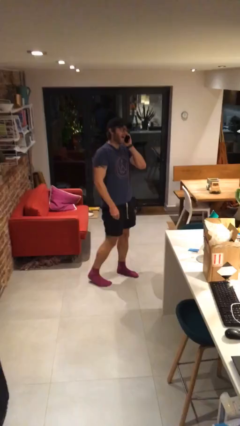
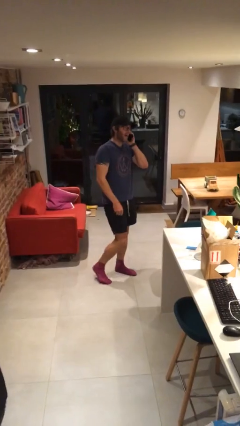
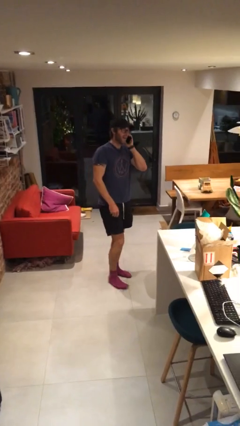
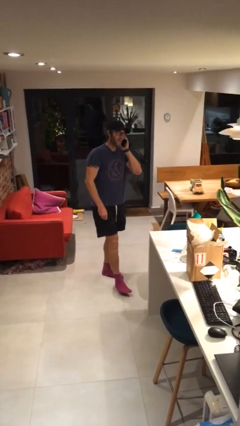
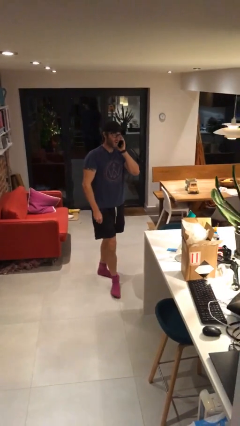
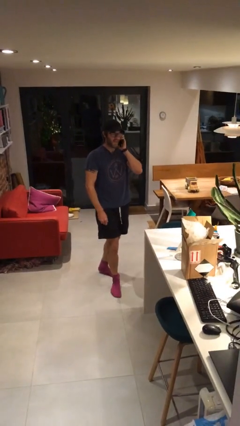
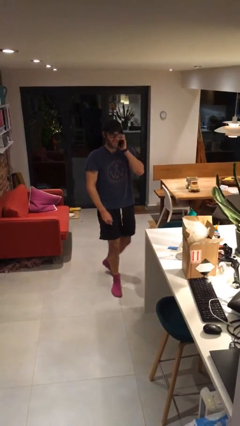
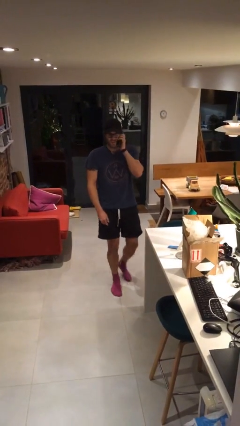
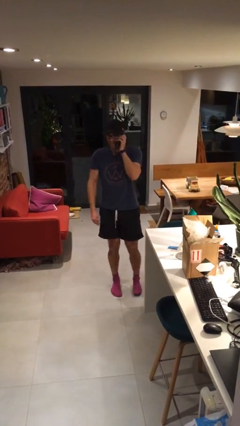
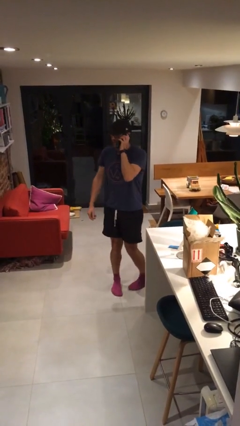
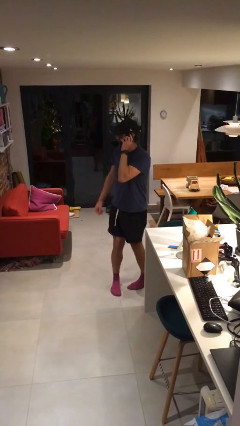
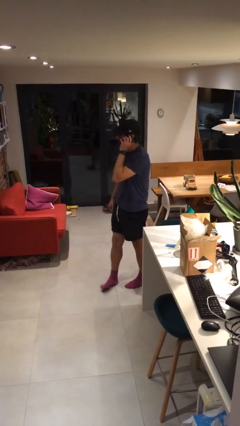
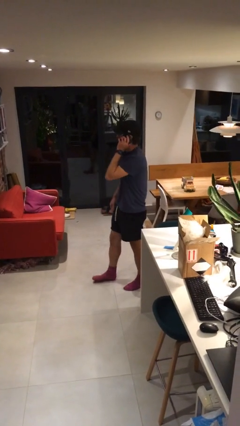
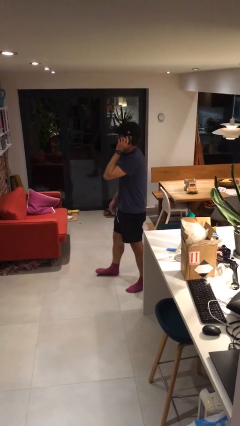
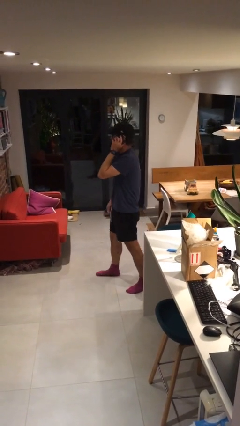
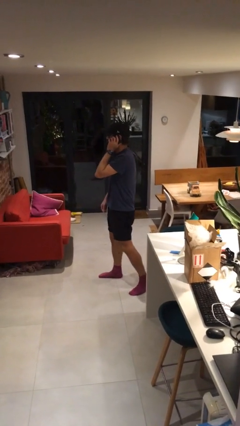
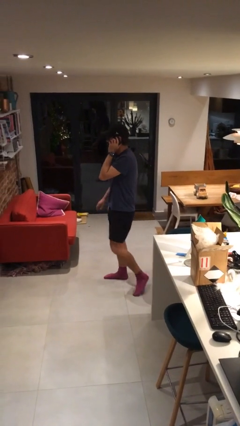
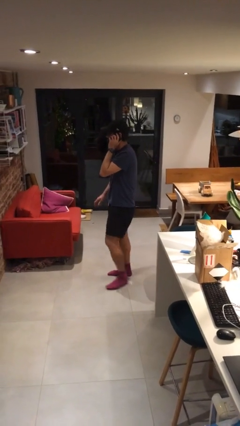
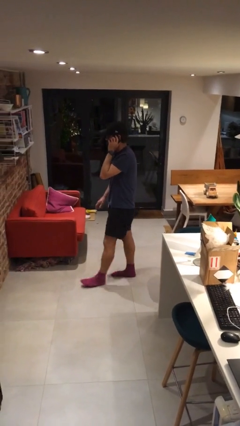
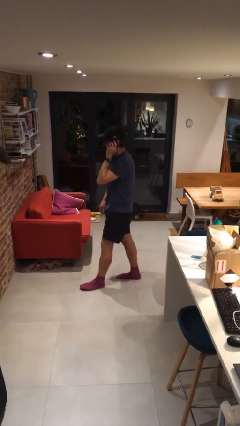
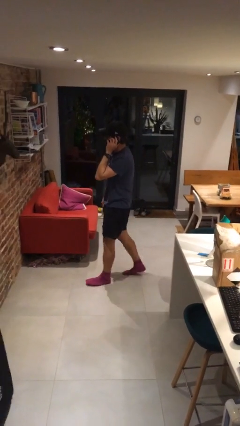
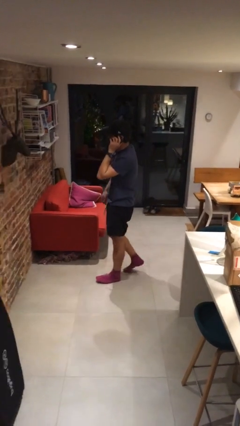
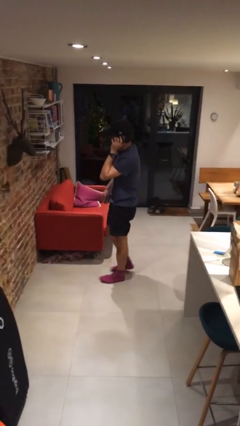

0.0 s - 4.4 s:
person talks on phone

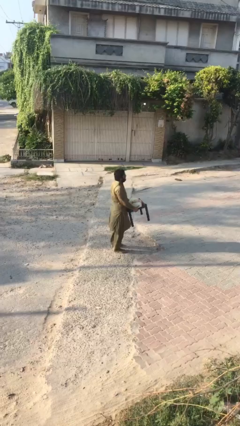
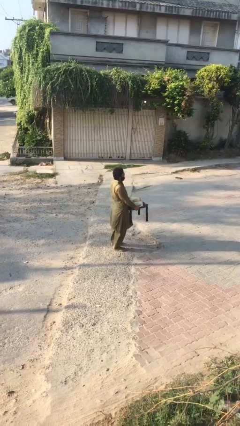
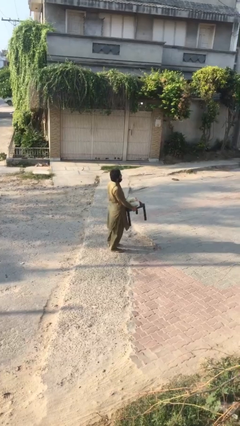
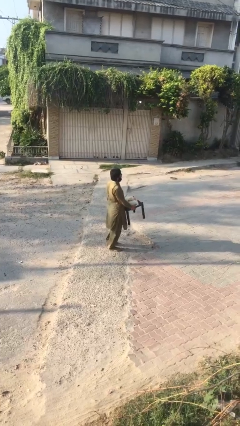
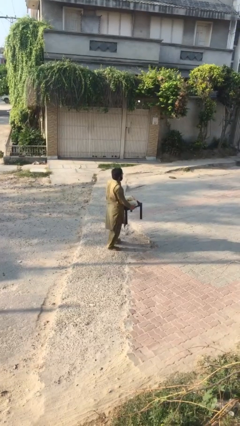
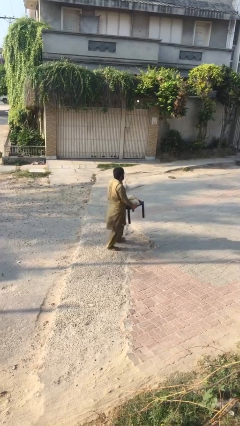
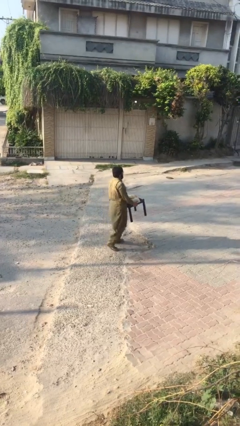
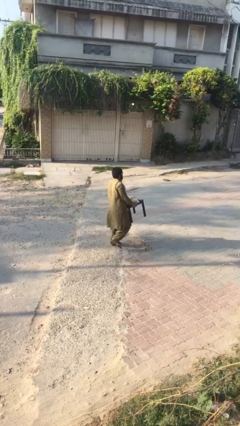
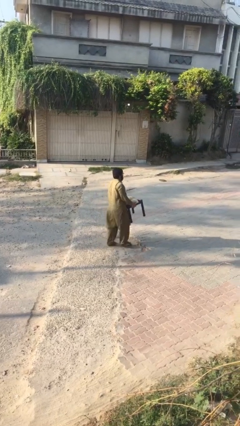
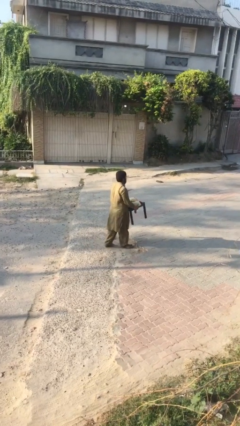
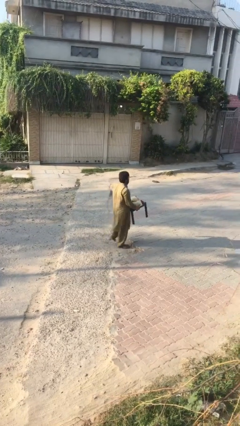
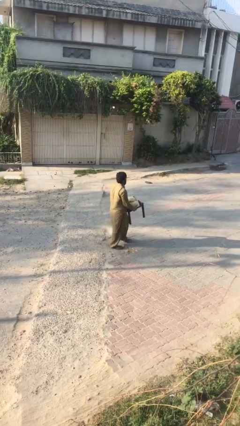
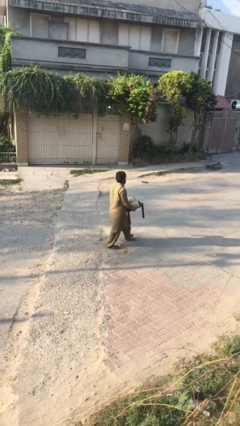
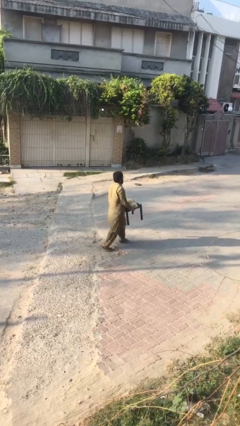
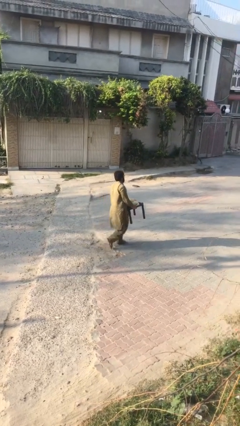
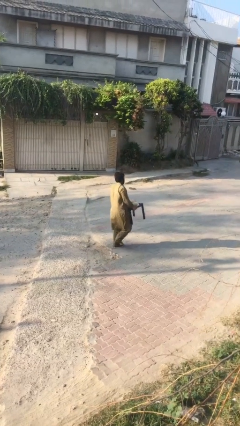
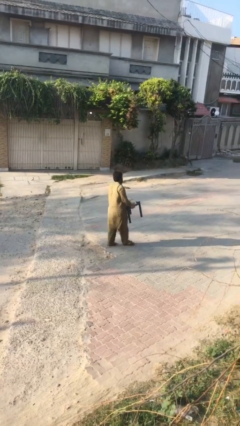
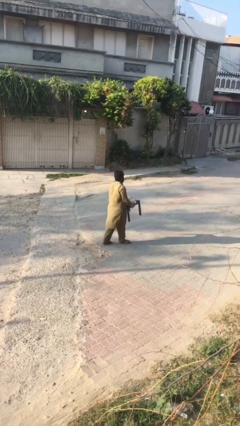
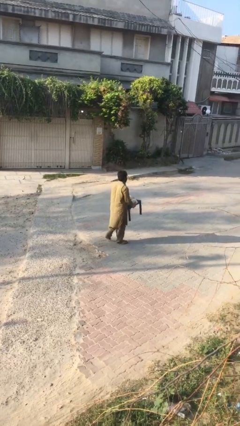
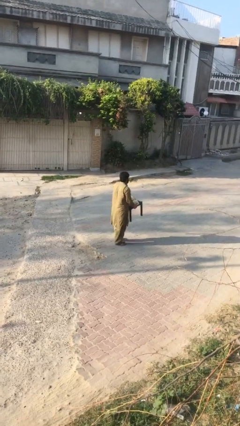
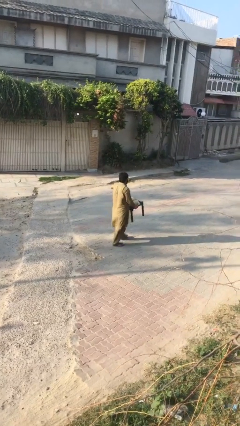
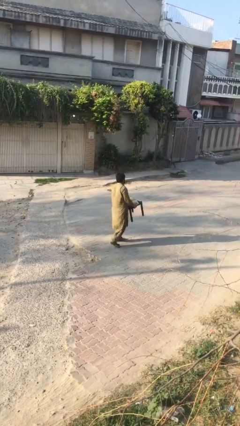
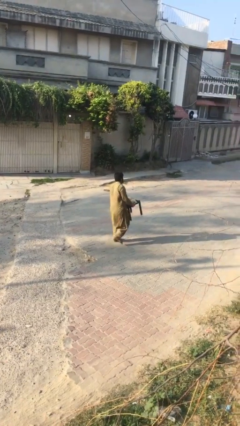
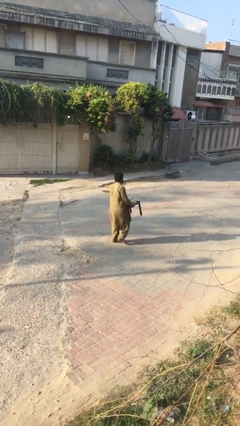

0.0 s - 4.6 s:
person carries heavy object

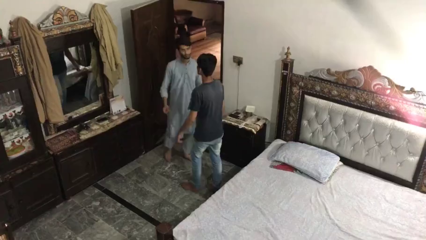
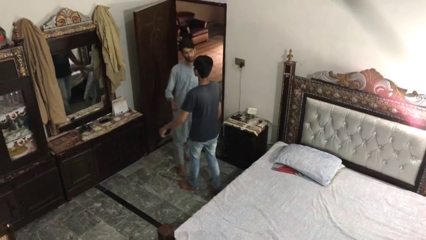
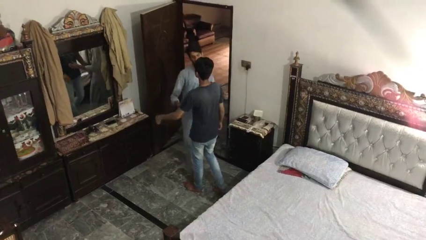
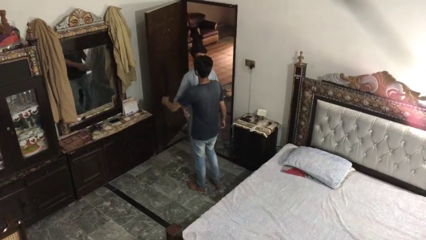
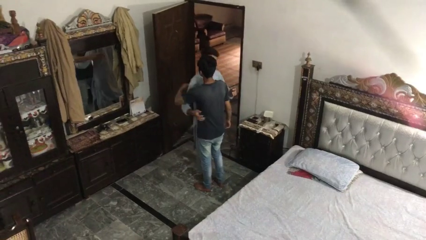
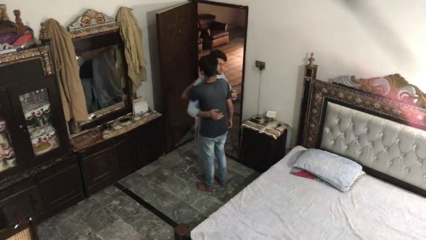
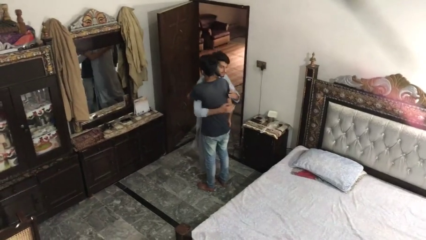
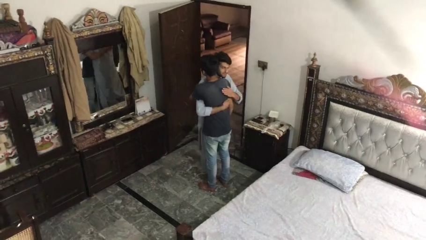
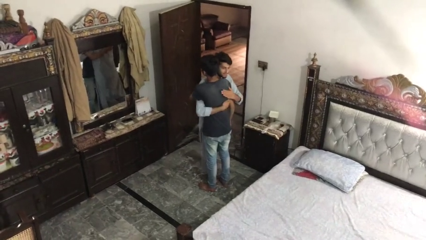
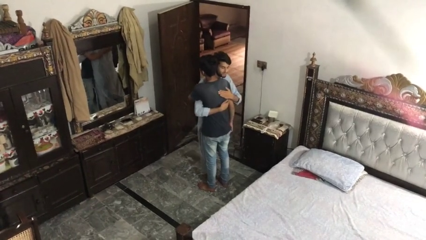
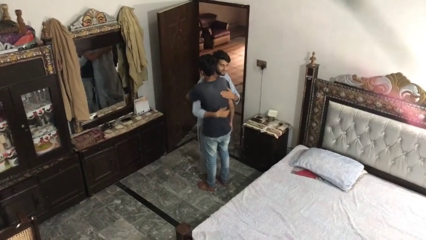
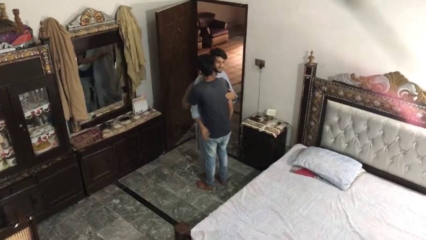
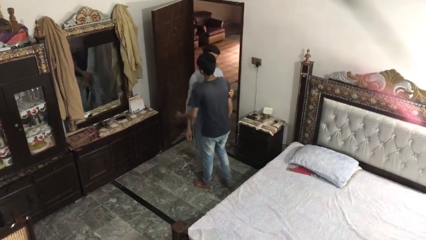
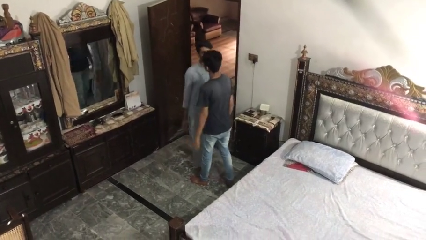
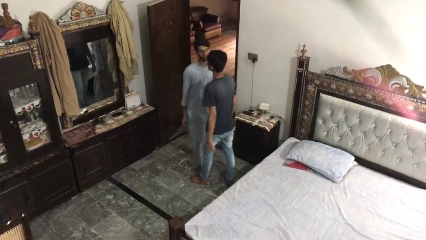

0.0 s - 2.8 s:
person embraces person

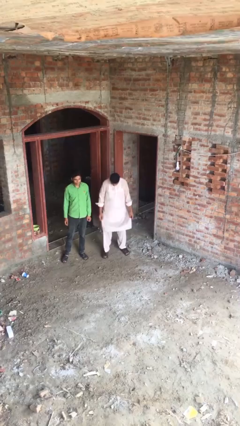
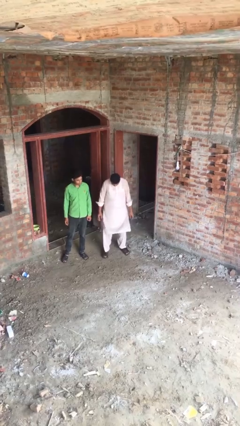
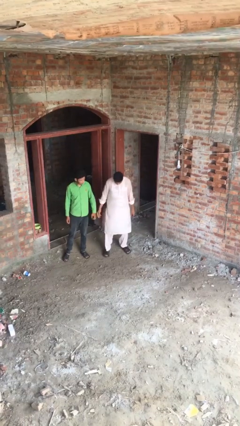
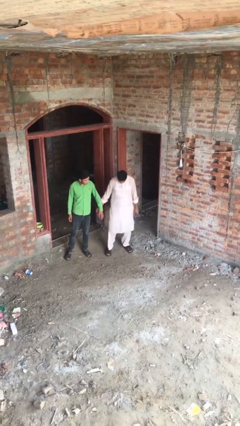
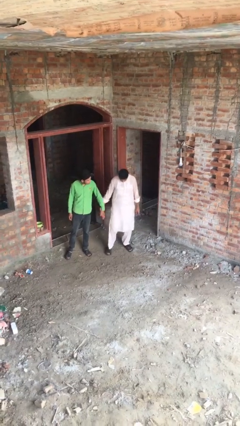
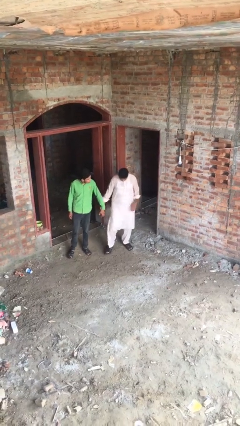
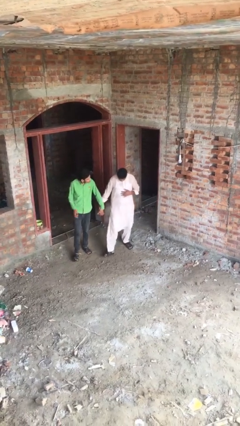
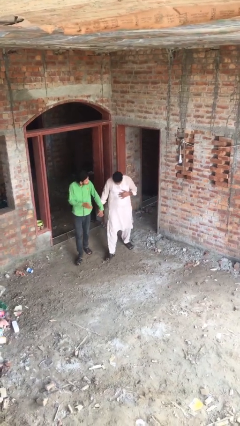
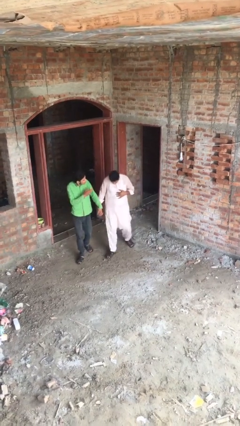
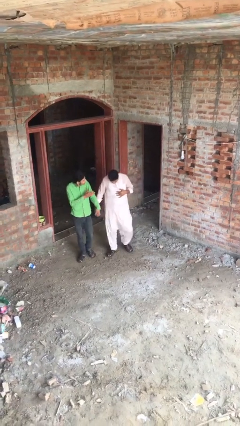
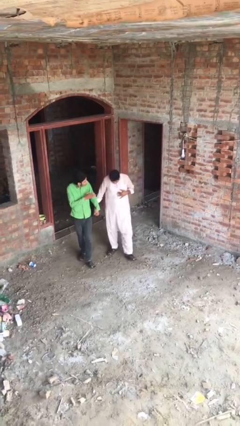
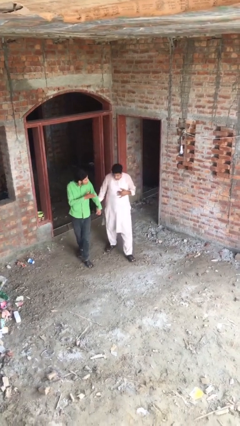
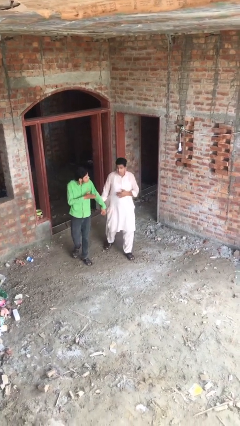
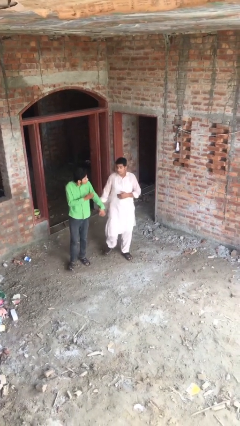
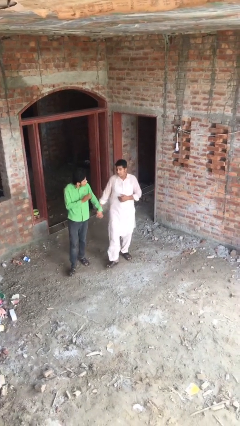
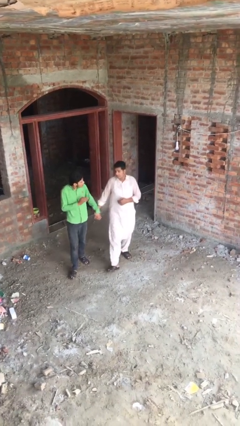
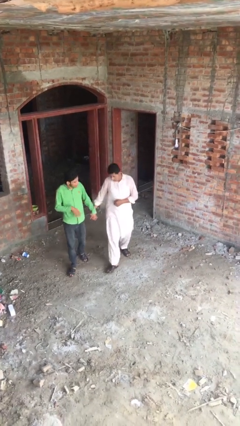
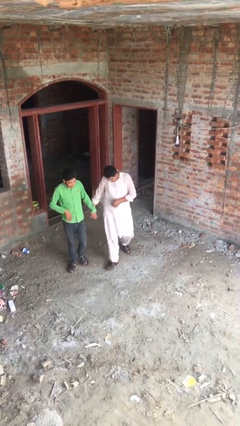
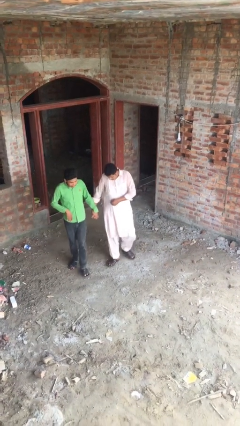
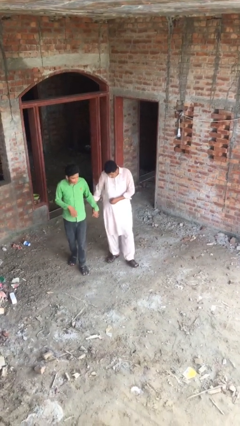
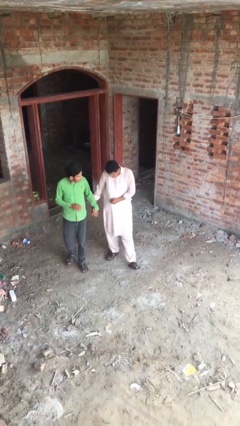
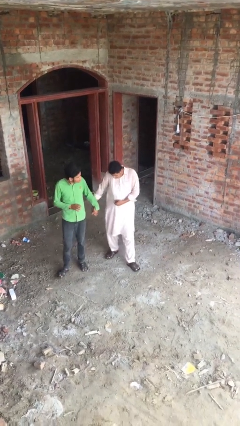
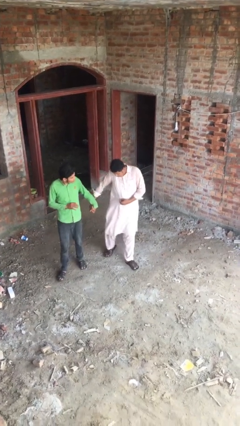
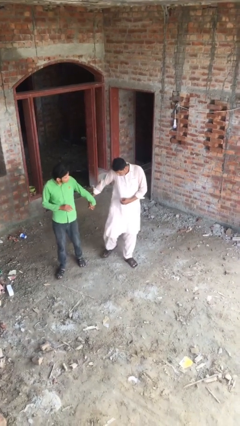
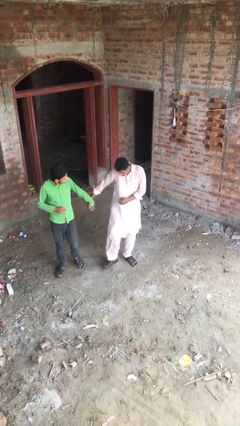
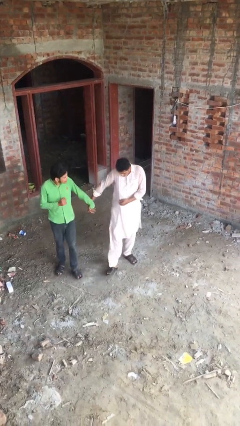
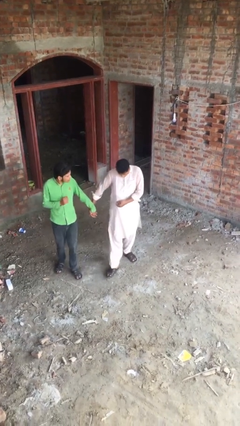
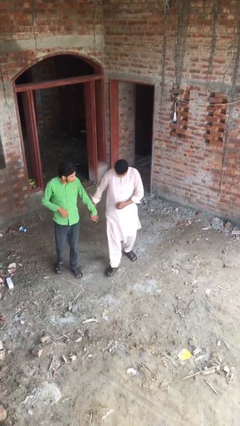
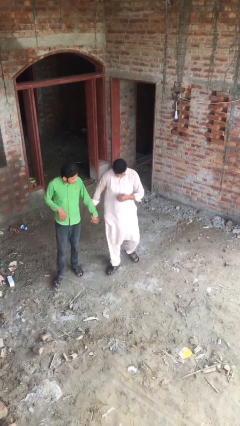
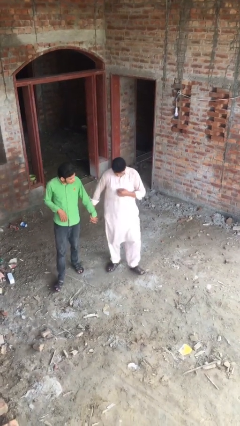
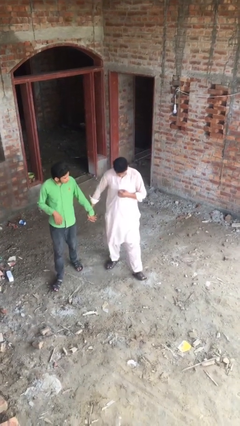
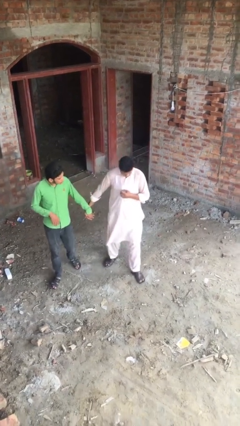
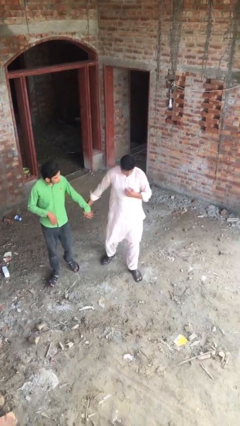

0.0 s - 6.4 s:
person holds hand
